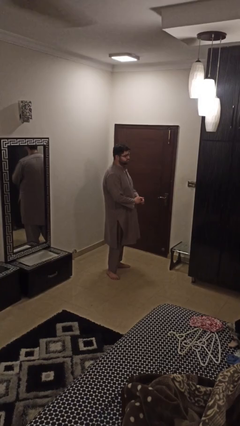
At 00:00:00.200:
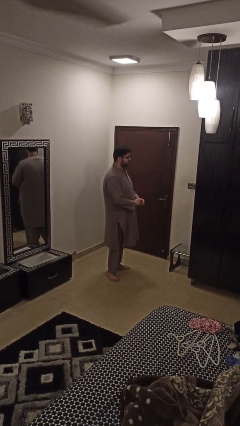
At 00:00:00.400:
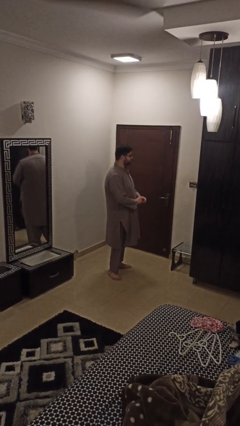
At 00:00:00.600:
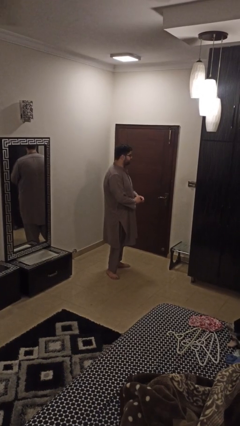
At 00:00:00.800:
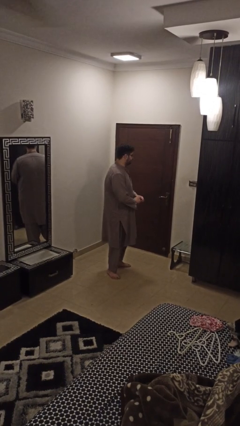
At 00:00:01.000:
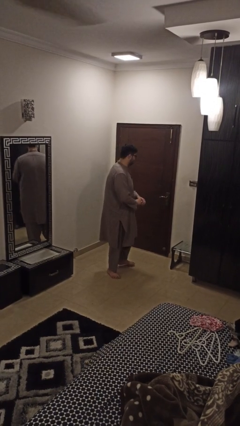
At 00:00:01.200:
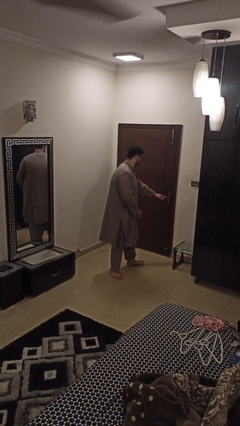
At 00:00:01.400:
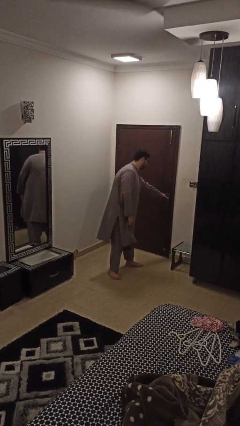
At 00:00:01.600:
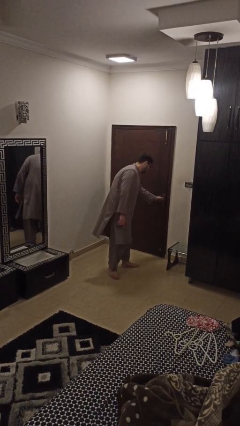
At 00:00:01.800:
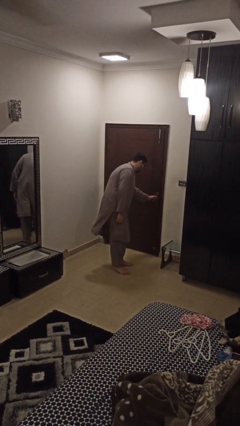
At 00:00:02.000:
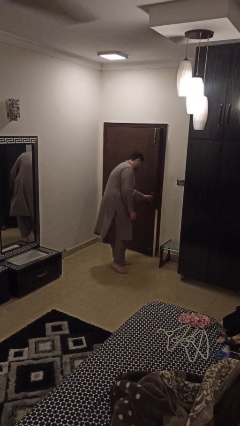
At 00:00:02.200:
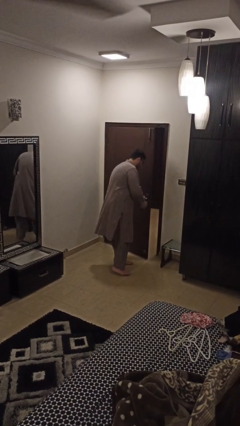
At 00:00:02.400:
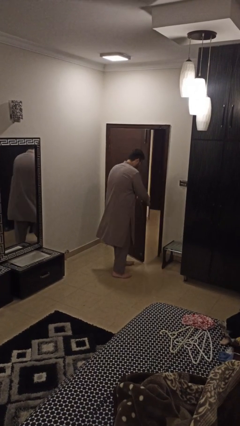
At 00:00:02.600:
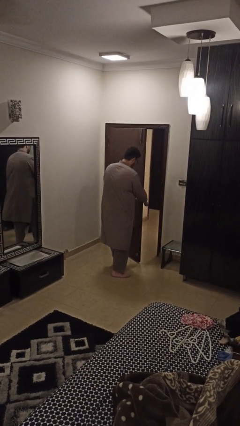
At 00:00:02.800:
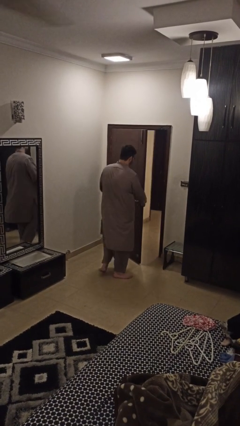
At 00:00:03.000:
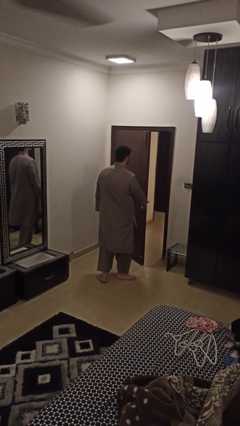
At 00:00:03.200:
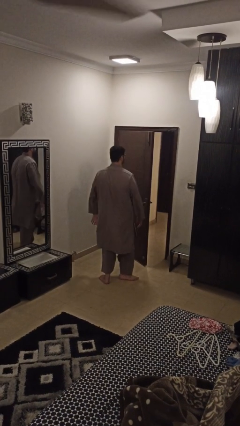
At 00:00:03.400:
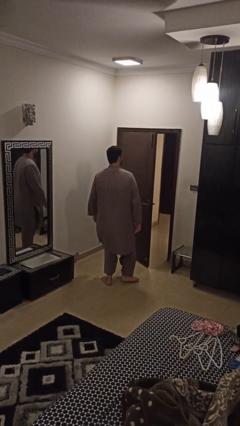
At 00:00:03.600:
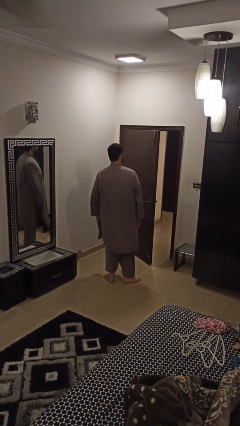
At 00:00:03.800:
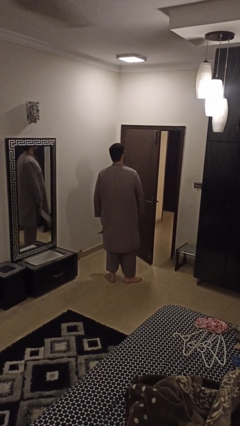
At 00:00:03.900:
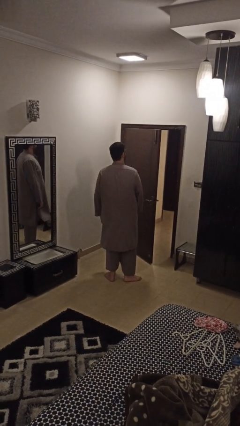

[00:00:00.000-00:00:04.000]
person opens facility door

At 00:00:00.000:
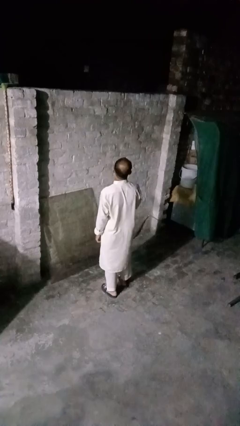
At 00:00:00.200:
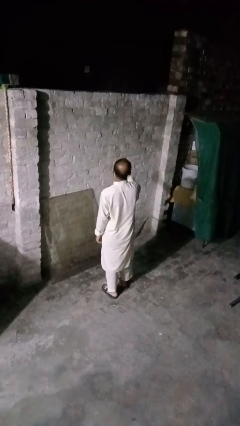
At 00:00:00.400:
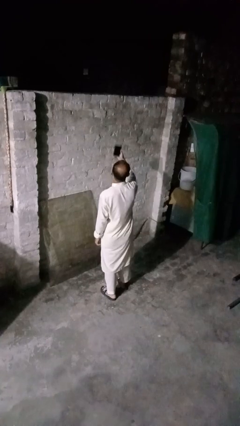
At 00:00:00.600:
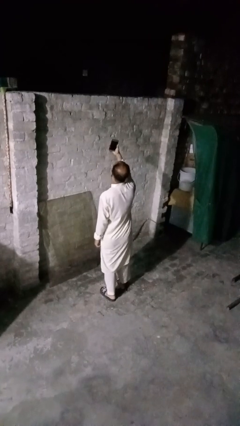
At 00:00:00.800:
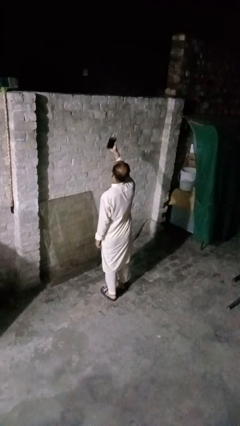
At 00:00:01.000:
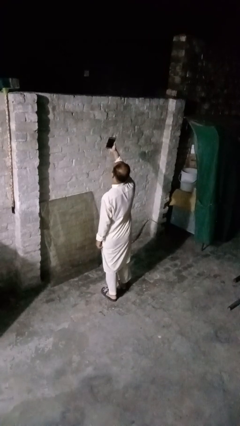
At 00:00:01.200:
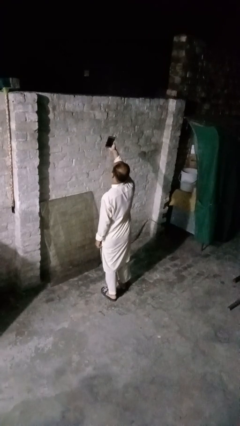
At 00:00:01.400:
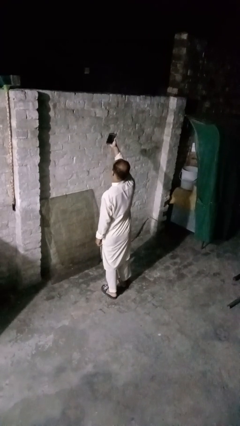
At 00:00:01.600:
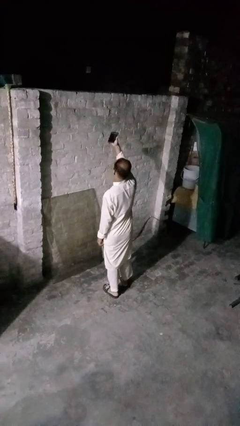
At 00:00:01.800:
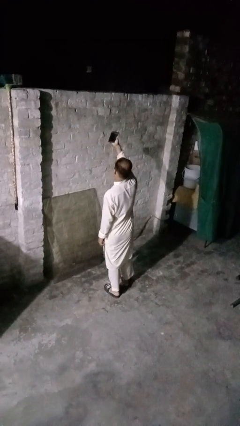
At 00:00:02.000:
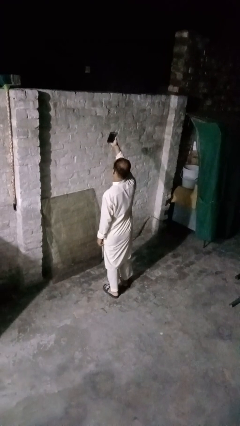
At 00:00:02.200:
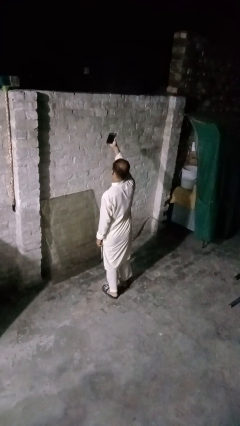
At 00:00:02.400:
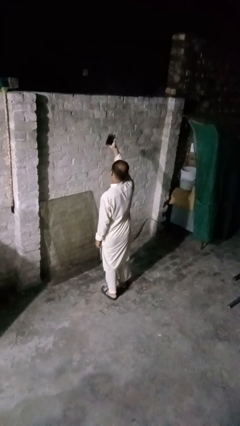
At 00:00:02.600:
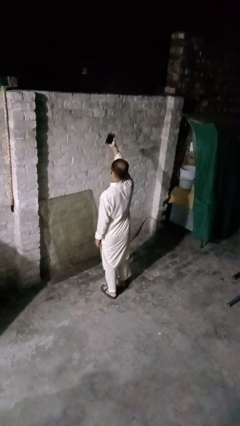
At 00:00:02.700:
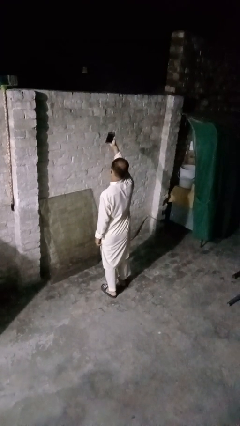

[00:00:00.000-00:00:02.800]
person takes selfie

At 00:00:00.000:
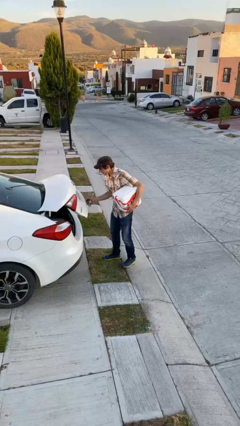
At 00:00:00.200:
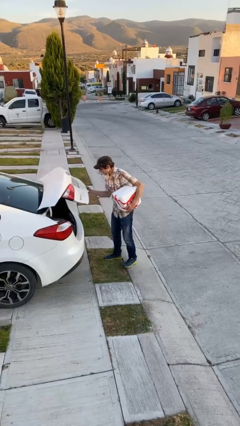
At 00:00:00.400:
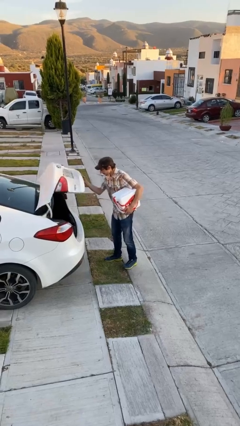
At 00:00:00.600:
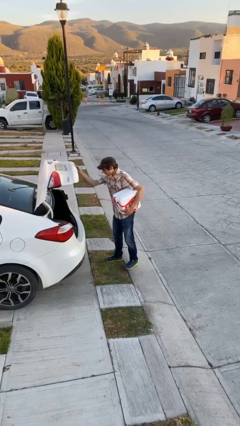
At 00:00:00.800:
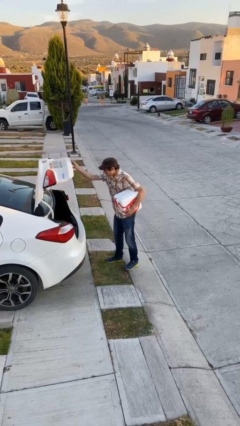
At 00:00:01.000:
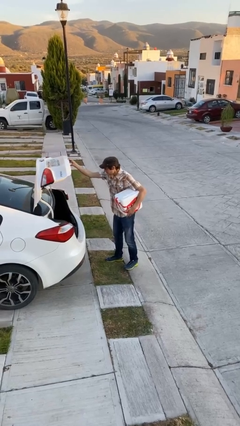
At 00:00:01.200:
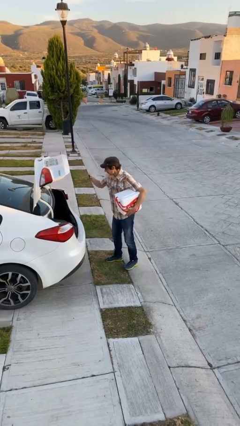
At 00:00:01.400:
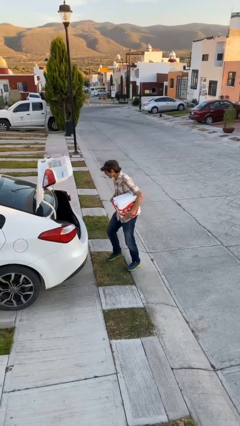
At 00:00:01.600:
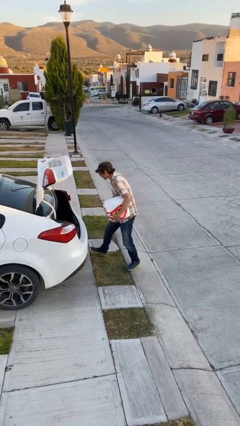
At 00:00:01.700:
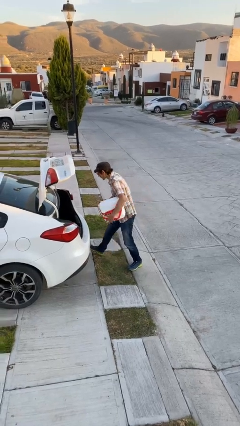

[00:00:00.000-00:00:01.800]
person opens car trunk

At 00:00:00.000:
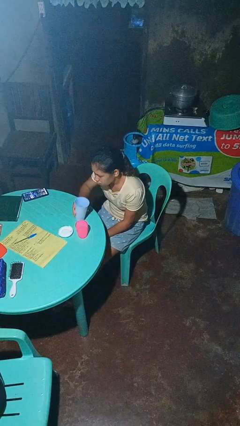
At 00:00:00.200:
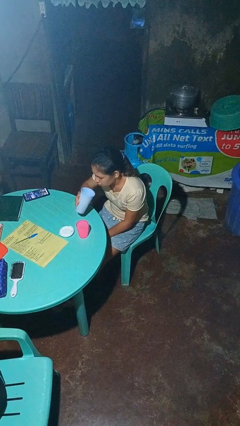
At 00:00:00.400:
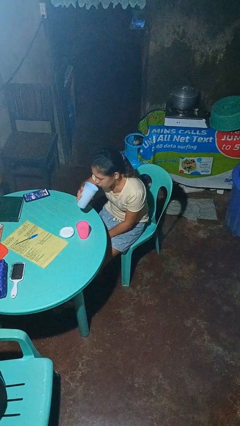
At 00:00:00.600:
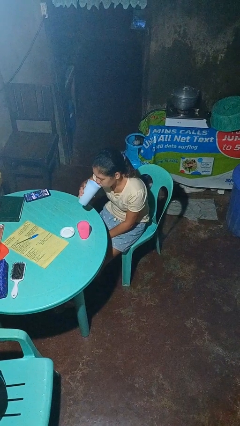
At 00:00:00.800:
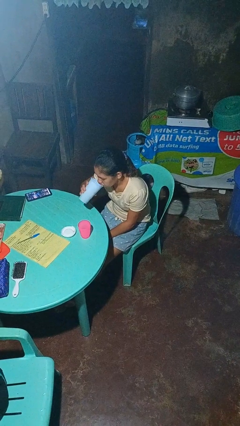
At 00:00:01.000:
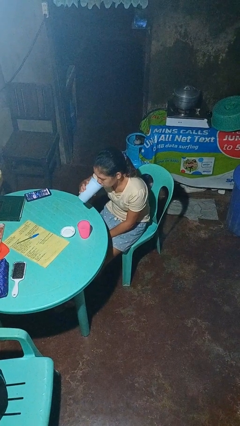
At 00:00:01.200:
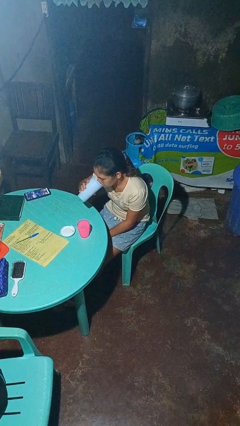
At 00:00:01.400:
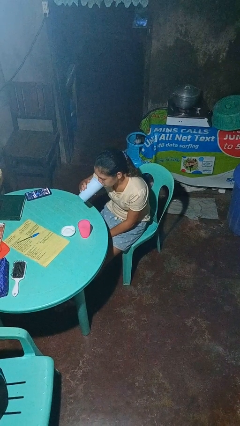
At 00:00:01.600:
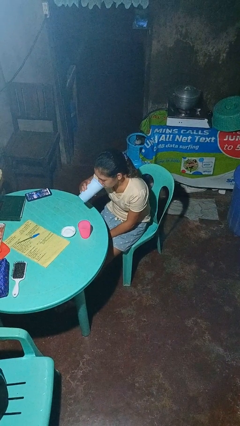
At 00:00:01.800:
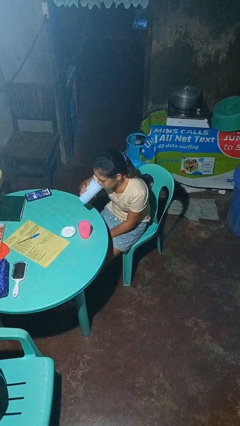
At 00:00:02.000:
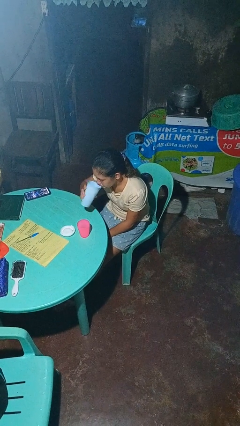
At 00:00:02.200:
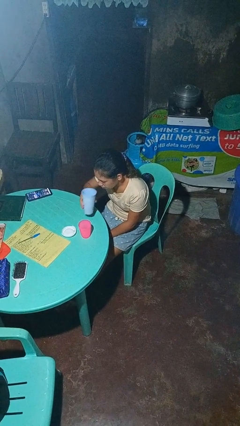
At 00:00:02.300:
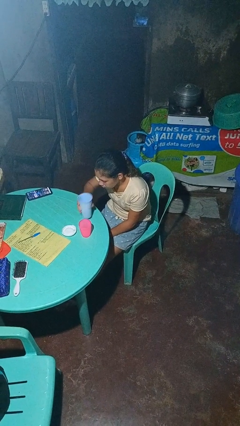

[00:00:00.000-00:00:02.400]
person drinks from bottle

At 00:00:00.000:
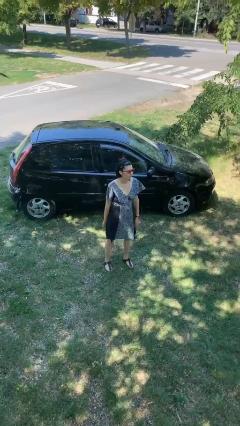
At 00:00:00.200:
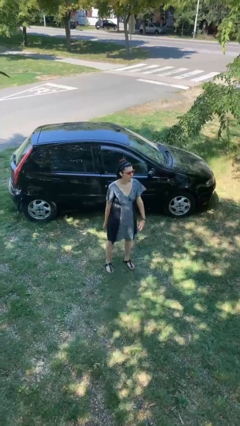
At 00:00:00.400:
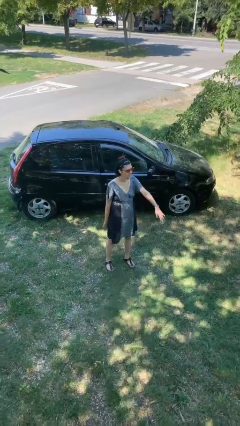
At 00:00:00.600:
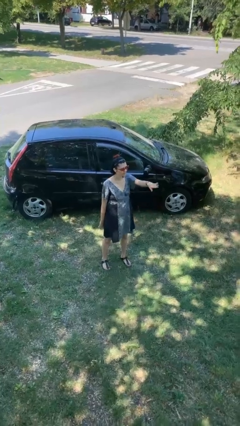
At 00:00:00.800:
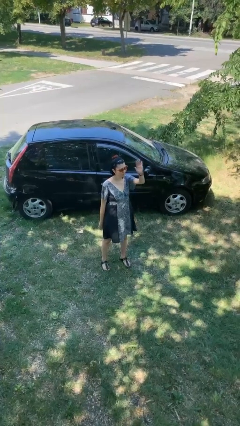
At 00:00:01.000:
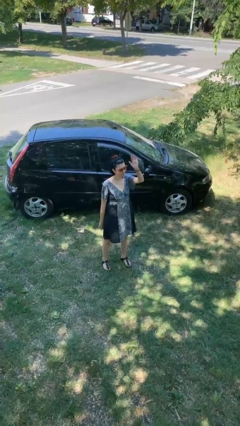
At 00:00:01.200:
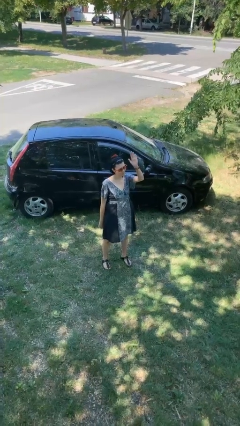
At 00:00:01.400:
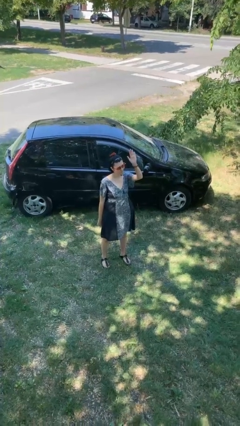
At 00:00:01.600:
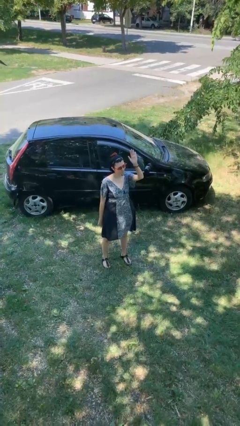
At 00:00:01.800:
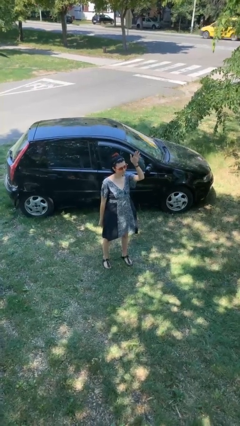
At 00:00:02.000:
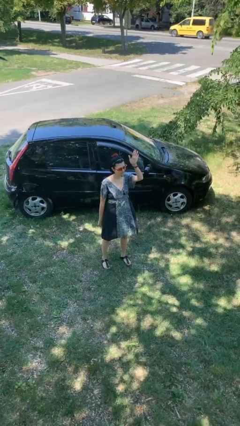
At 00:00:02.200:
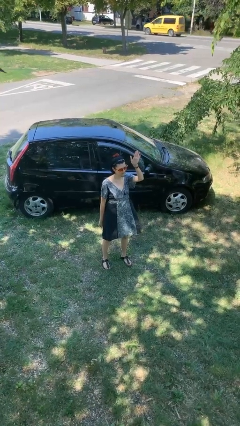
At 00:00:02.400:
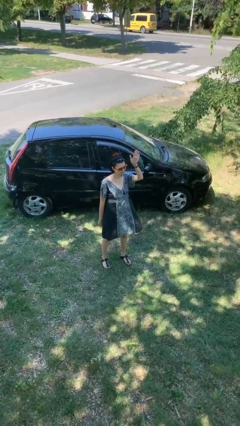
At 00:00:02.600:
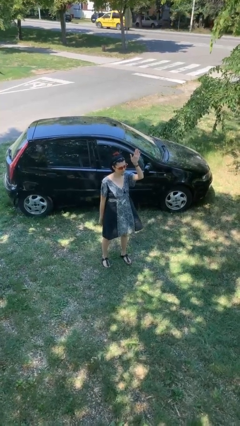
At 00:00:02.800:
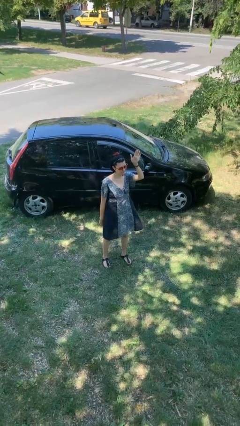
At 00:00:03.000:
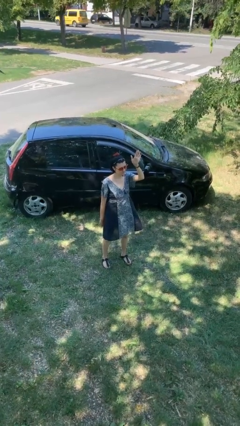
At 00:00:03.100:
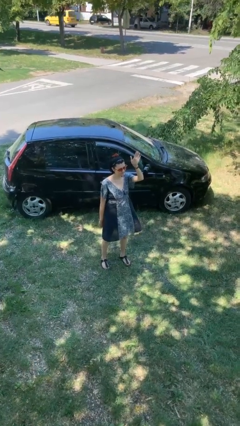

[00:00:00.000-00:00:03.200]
person waves at person

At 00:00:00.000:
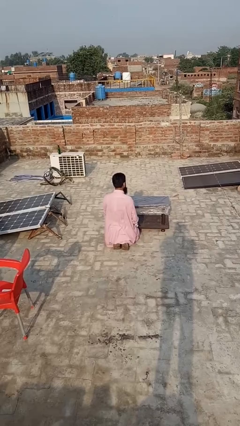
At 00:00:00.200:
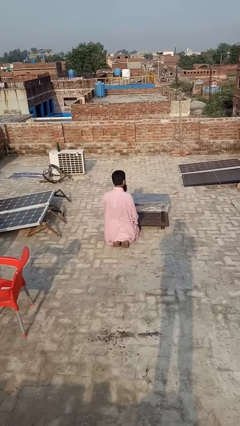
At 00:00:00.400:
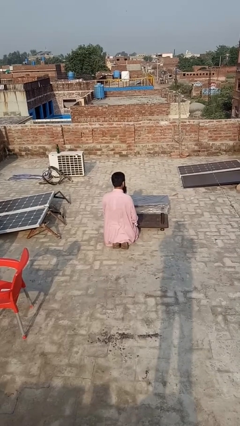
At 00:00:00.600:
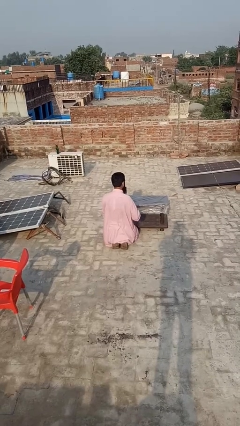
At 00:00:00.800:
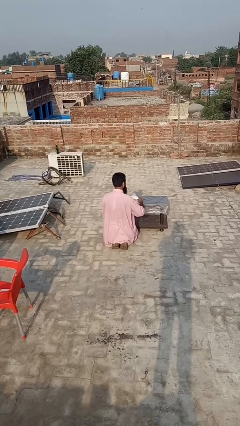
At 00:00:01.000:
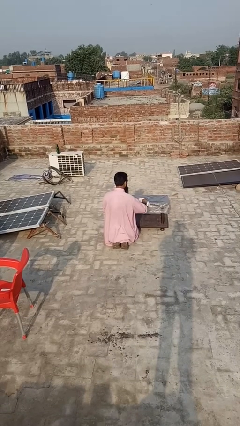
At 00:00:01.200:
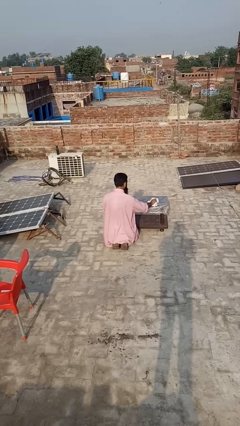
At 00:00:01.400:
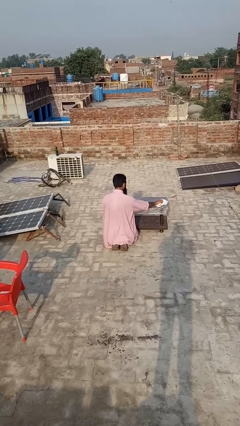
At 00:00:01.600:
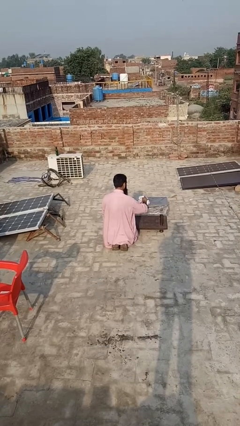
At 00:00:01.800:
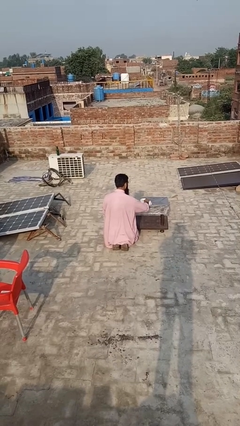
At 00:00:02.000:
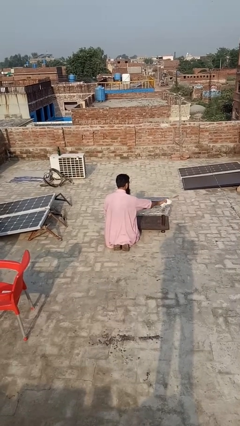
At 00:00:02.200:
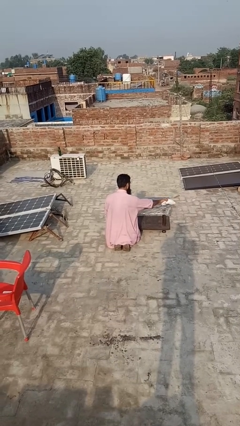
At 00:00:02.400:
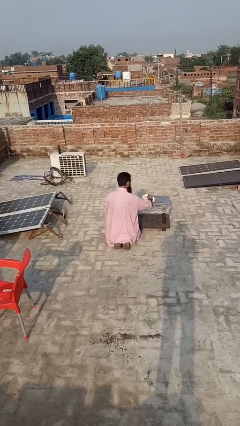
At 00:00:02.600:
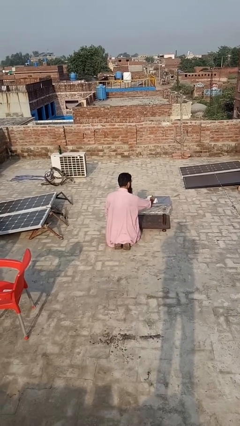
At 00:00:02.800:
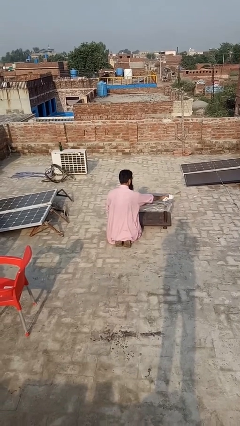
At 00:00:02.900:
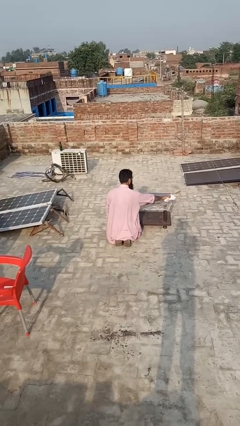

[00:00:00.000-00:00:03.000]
person cleans table with rag
